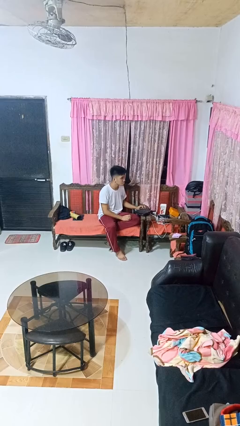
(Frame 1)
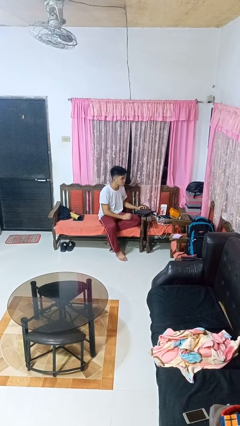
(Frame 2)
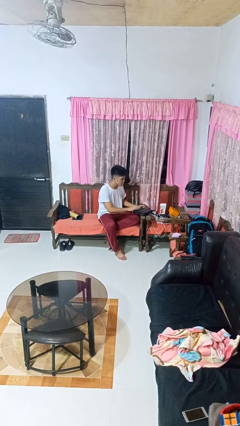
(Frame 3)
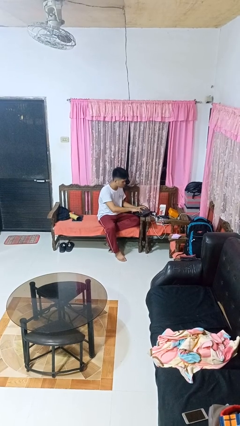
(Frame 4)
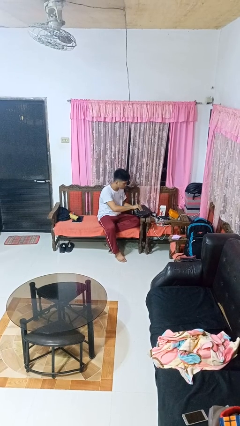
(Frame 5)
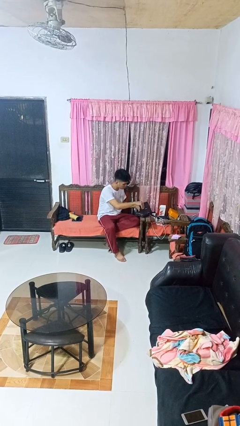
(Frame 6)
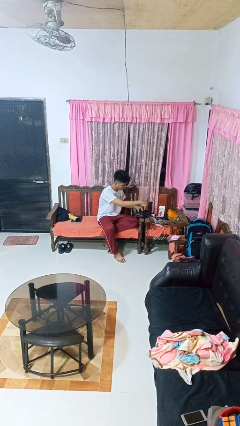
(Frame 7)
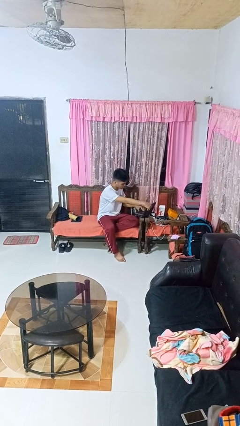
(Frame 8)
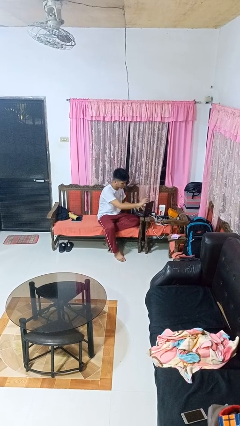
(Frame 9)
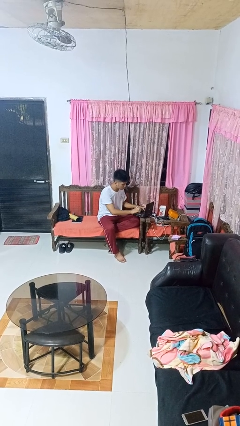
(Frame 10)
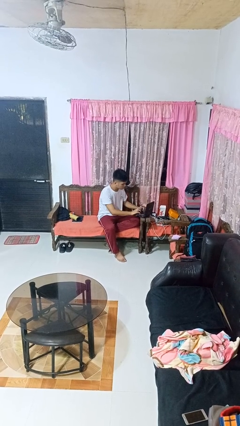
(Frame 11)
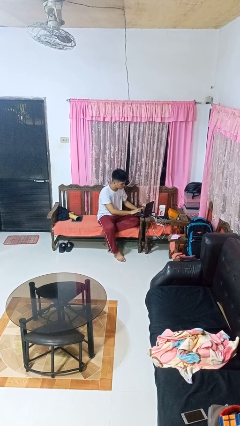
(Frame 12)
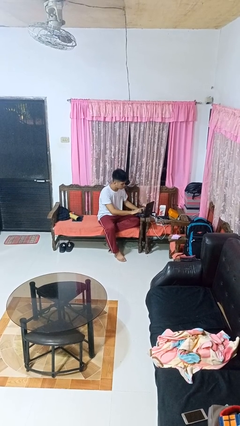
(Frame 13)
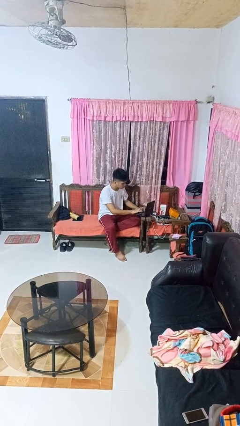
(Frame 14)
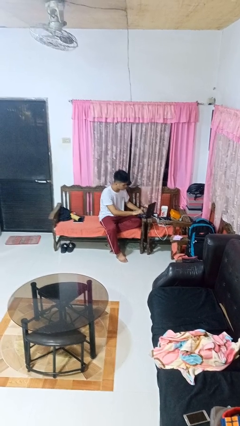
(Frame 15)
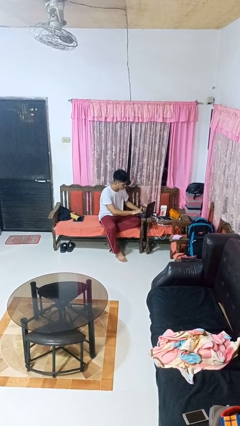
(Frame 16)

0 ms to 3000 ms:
person opens laptop

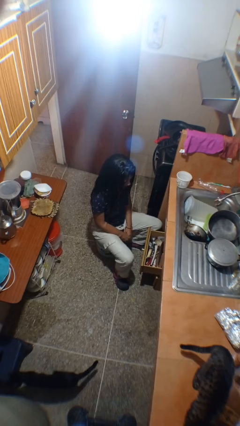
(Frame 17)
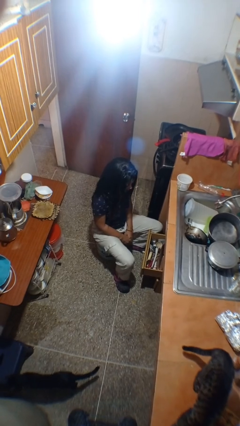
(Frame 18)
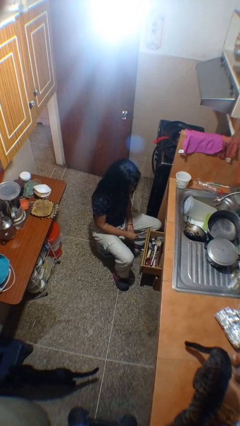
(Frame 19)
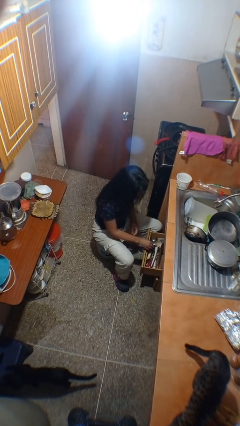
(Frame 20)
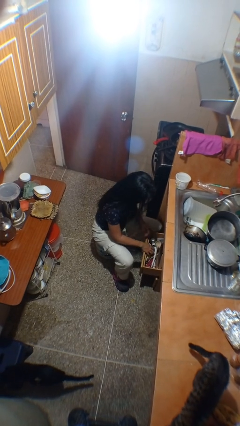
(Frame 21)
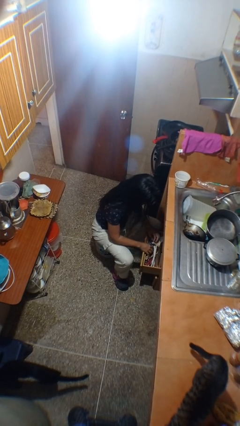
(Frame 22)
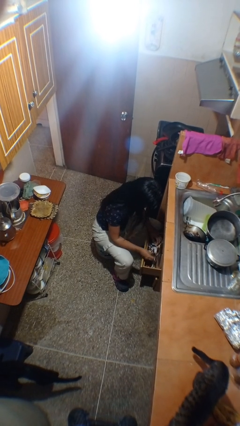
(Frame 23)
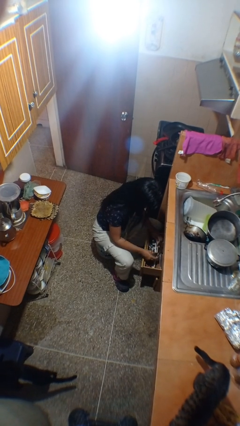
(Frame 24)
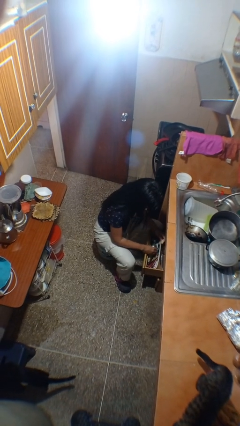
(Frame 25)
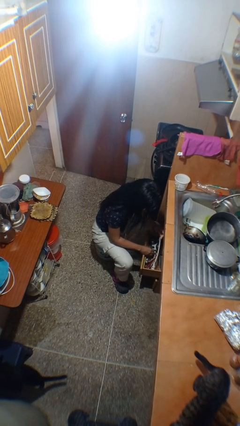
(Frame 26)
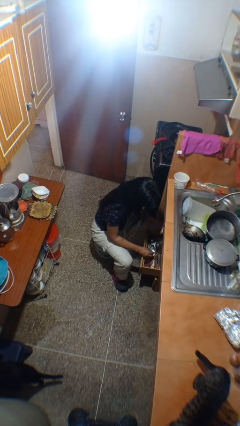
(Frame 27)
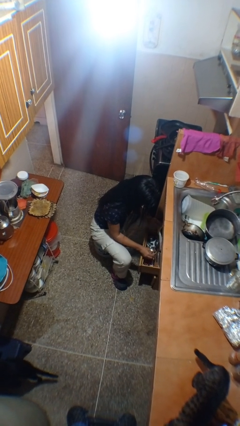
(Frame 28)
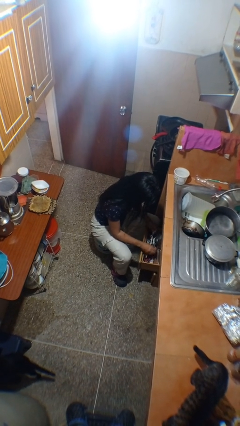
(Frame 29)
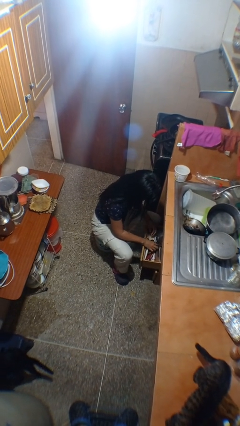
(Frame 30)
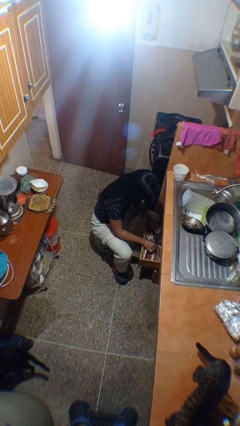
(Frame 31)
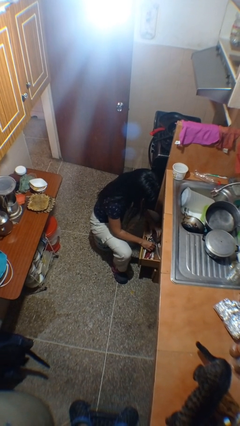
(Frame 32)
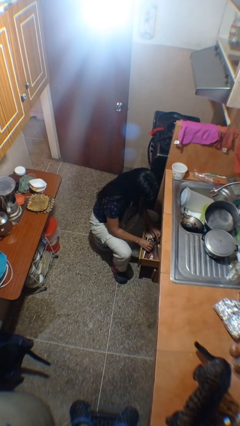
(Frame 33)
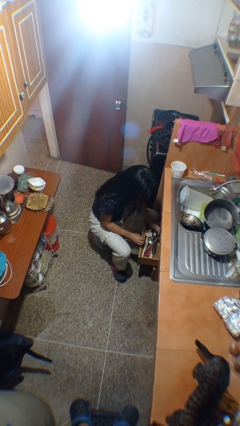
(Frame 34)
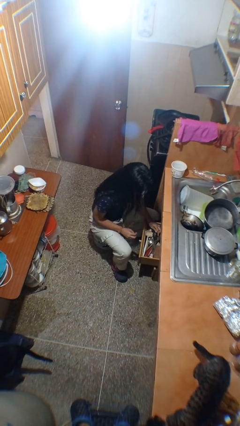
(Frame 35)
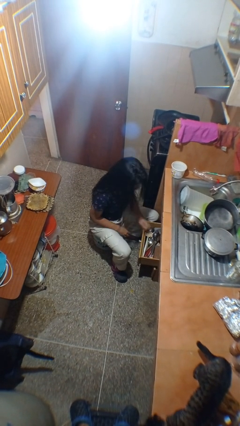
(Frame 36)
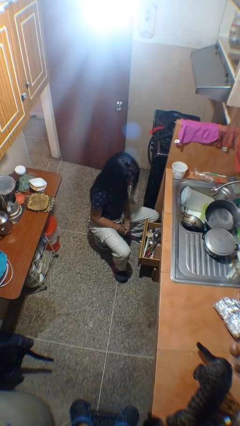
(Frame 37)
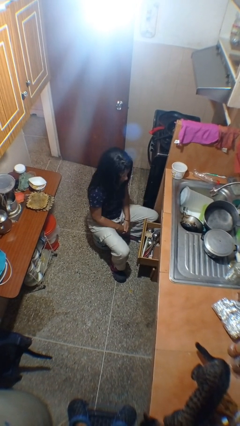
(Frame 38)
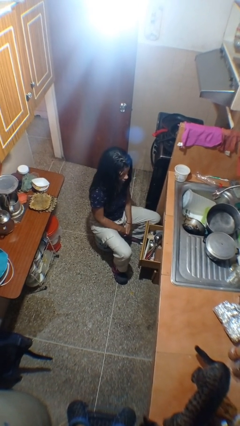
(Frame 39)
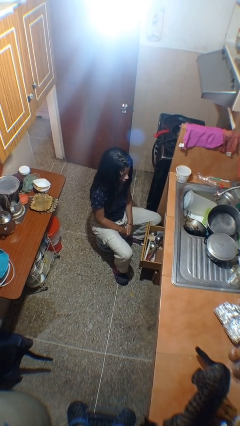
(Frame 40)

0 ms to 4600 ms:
person searches in kitchen drawer

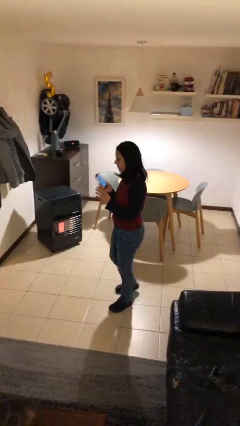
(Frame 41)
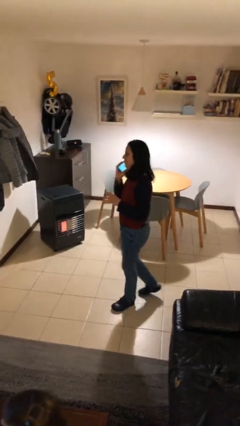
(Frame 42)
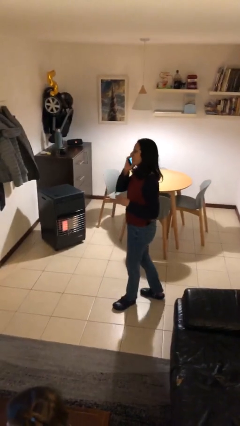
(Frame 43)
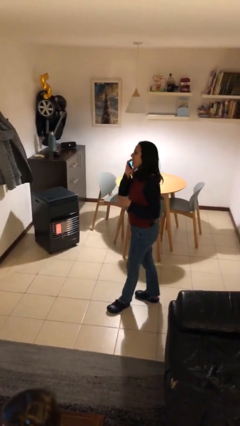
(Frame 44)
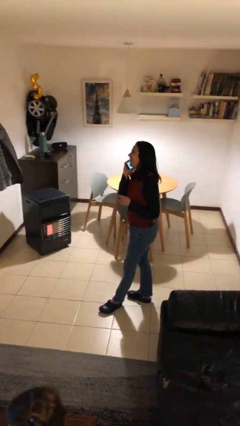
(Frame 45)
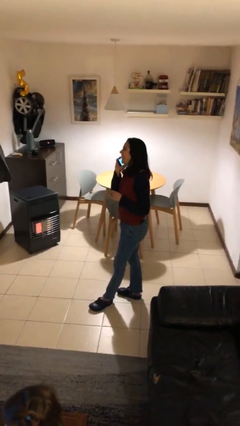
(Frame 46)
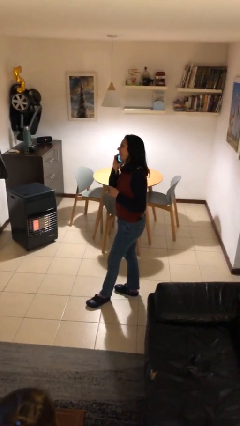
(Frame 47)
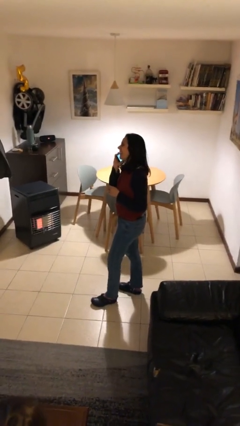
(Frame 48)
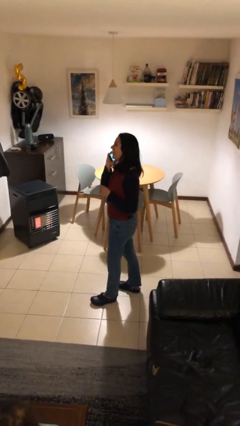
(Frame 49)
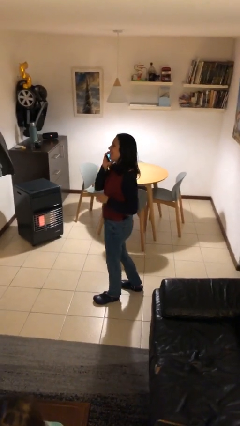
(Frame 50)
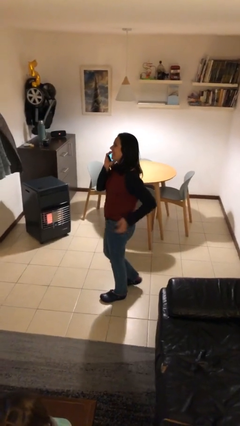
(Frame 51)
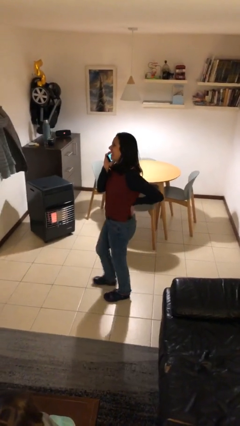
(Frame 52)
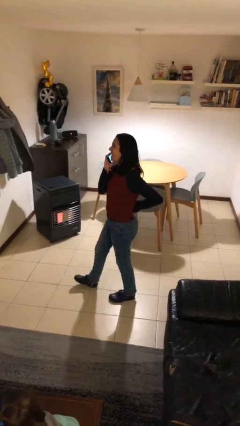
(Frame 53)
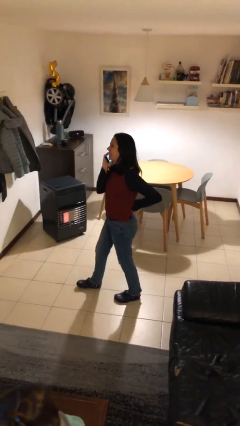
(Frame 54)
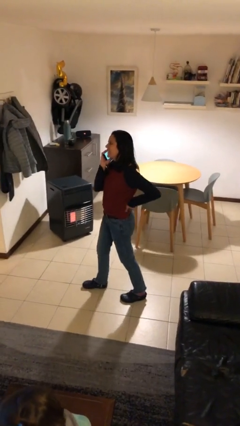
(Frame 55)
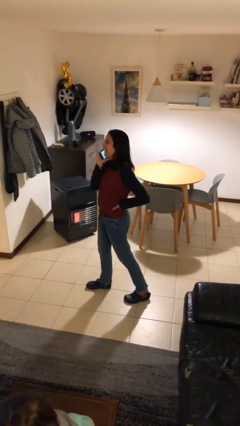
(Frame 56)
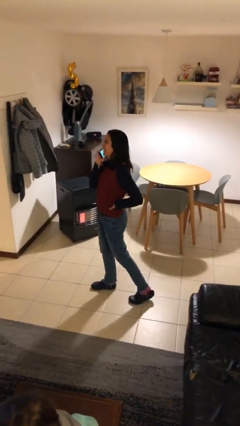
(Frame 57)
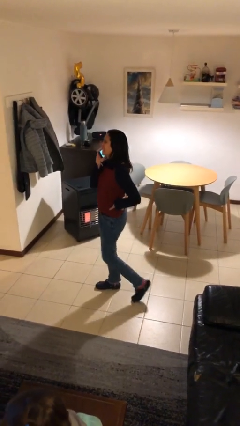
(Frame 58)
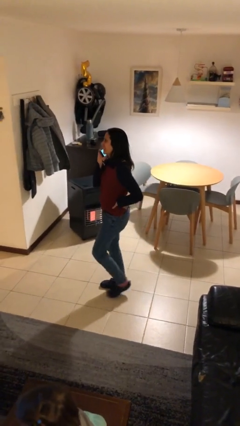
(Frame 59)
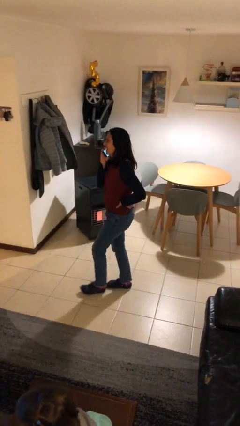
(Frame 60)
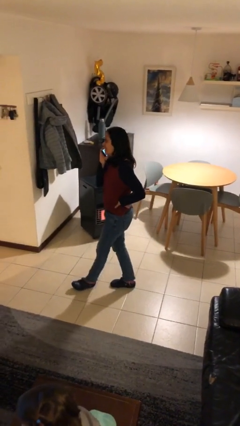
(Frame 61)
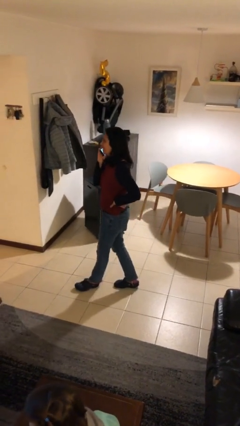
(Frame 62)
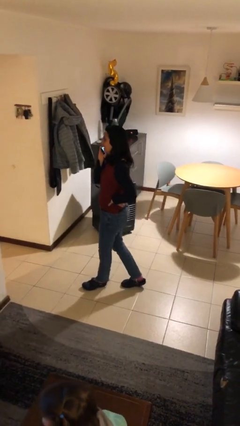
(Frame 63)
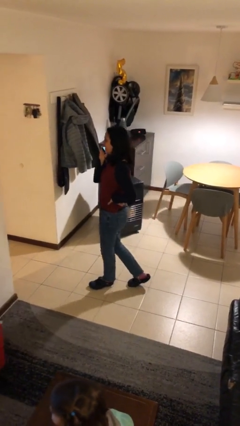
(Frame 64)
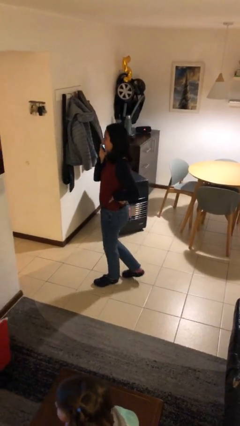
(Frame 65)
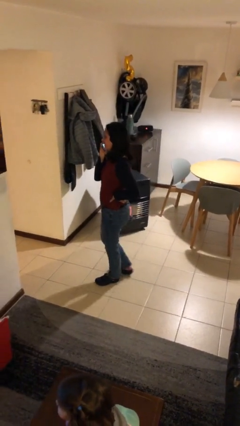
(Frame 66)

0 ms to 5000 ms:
person talks on phone

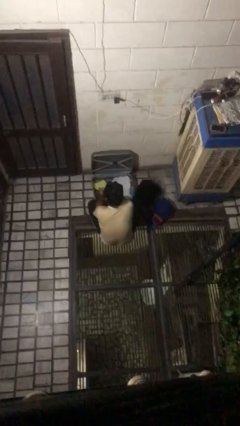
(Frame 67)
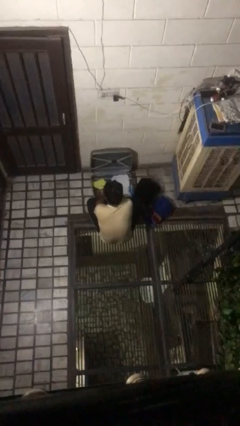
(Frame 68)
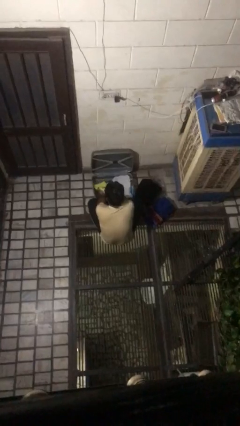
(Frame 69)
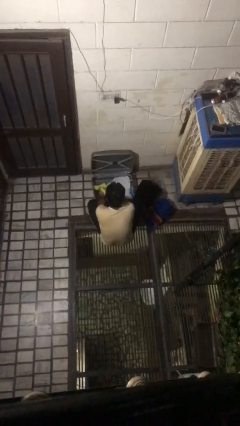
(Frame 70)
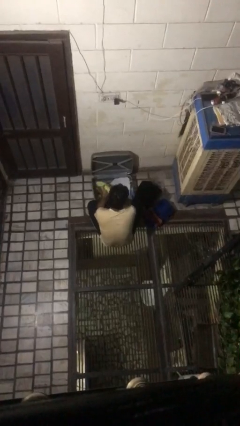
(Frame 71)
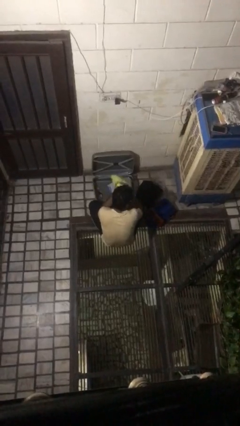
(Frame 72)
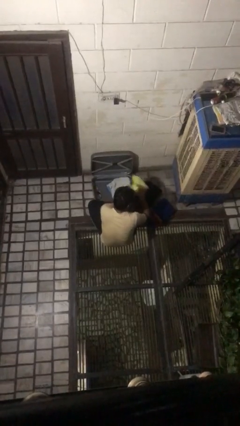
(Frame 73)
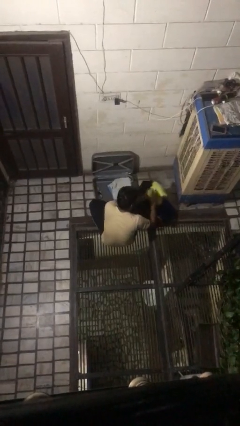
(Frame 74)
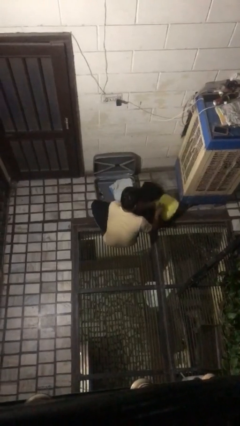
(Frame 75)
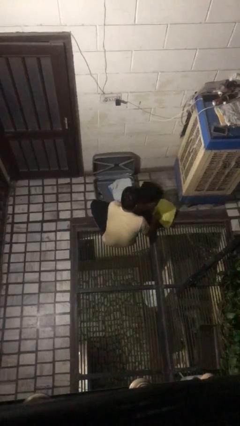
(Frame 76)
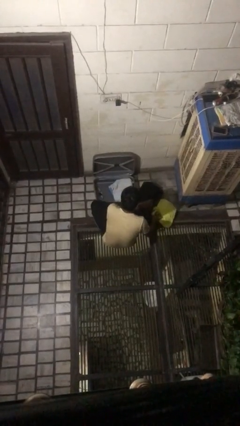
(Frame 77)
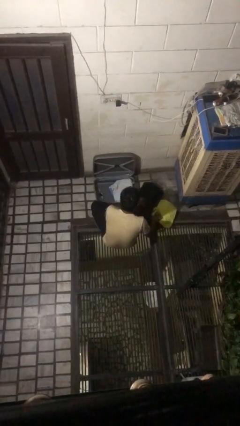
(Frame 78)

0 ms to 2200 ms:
person unloads clothes from suitcase

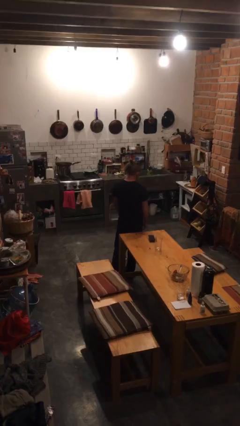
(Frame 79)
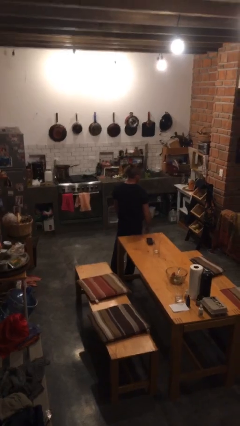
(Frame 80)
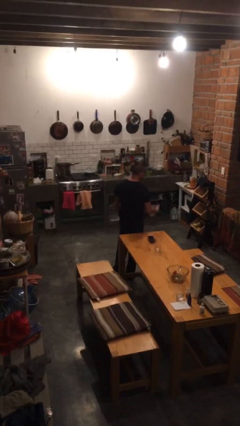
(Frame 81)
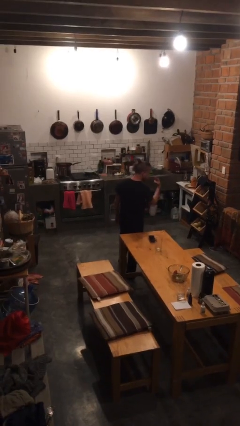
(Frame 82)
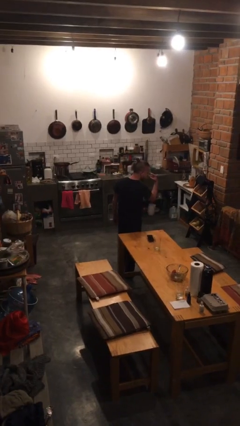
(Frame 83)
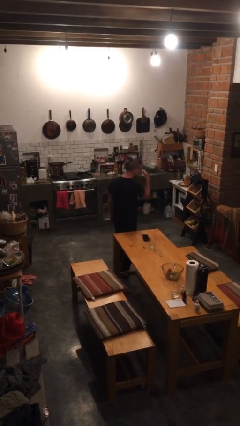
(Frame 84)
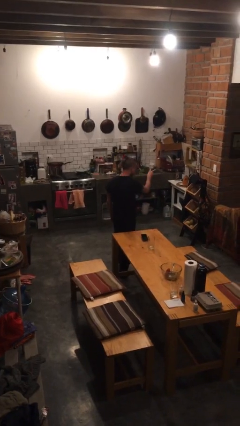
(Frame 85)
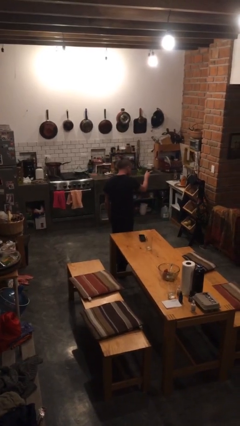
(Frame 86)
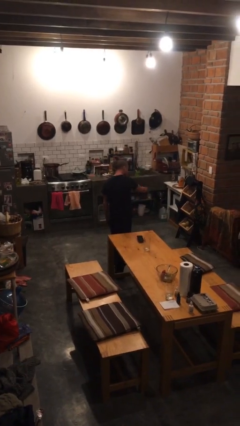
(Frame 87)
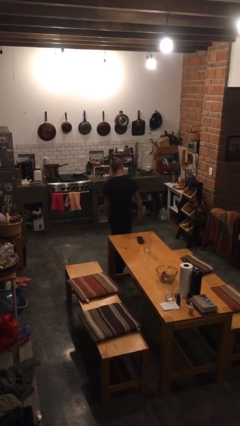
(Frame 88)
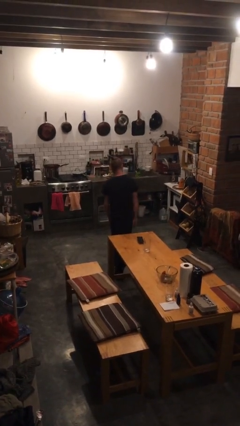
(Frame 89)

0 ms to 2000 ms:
person gestures watch closely

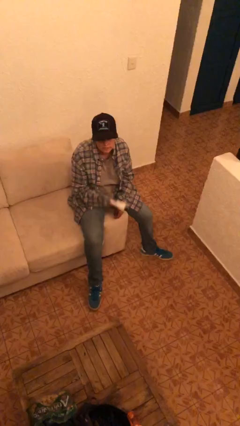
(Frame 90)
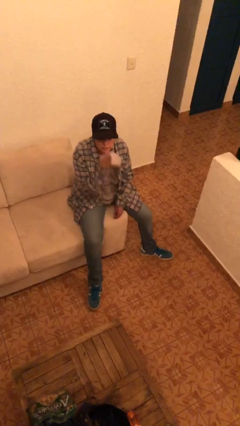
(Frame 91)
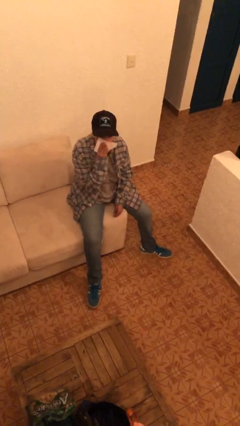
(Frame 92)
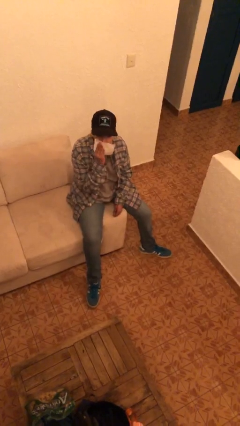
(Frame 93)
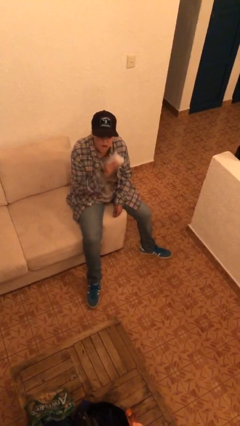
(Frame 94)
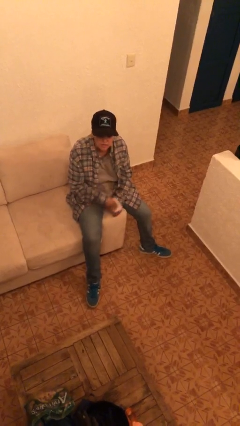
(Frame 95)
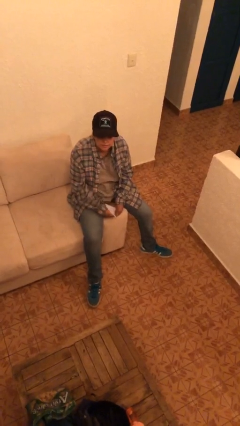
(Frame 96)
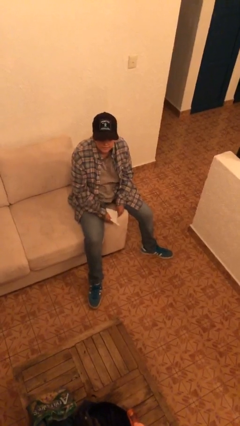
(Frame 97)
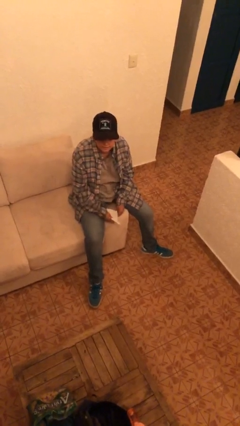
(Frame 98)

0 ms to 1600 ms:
person wipes mouth with napkin
